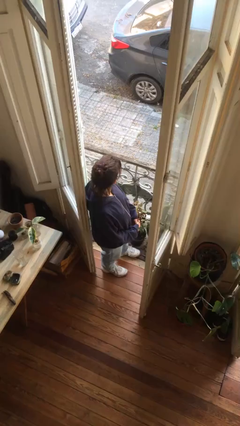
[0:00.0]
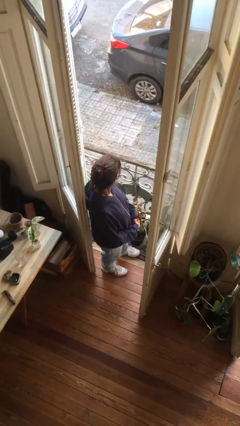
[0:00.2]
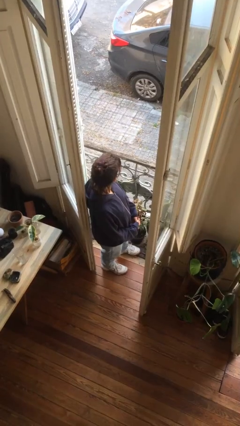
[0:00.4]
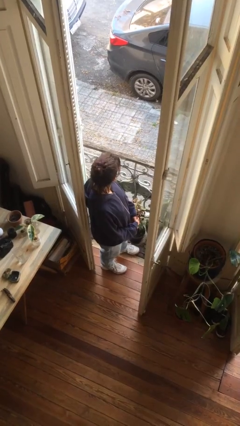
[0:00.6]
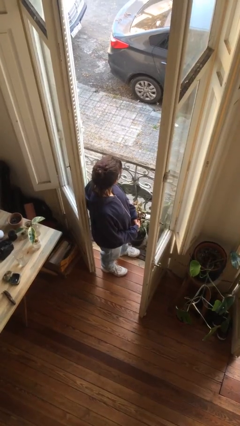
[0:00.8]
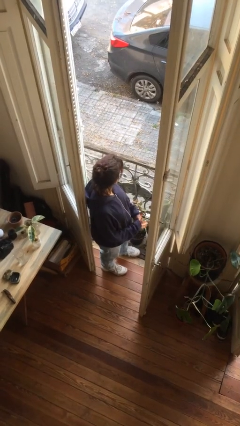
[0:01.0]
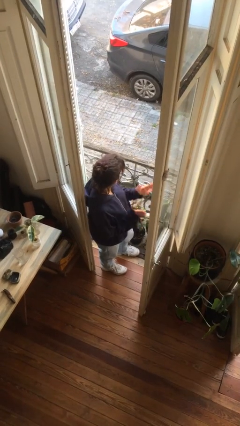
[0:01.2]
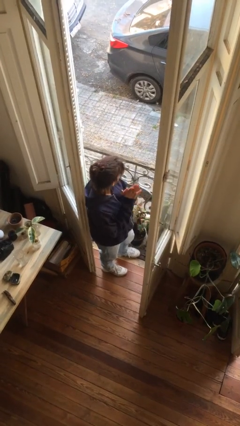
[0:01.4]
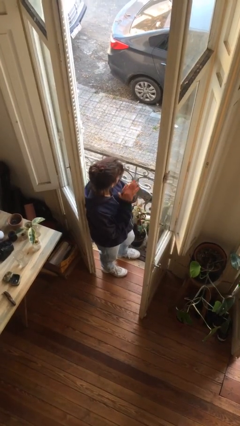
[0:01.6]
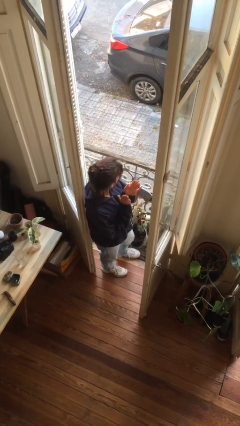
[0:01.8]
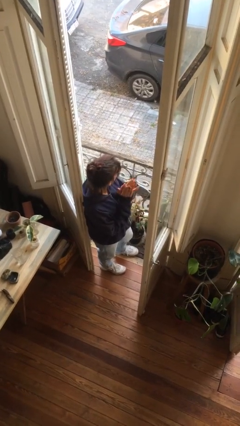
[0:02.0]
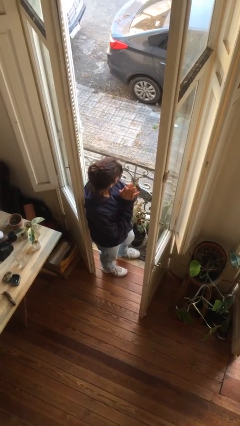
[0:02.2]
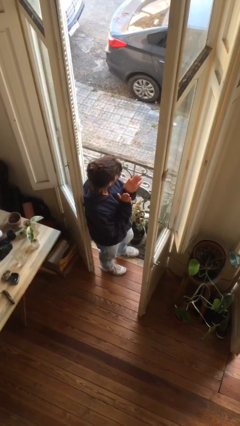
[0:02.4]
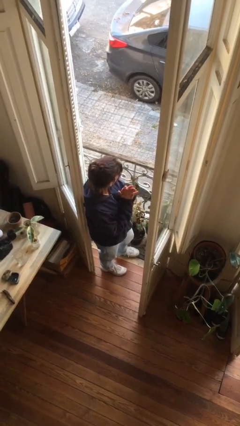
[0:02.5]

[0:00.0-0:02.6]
person claps hands

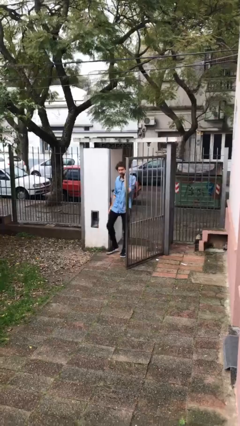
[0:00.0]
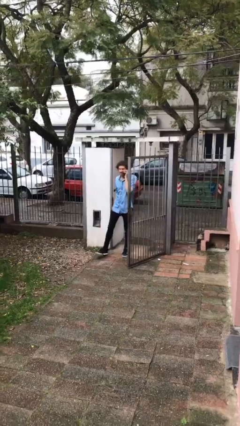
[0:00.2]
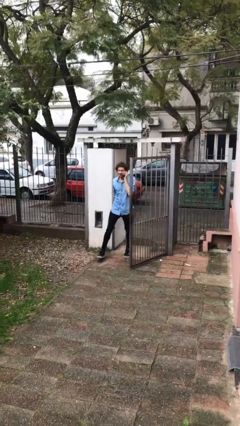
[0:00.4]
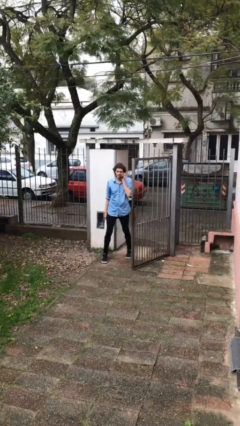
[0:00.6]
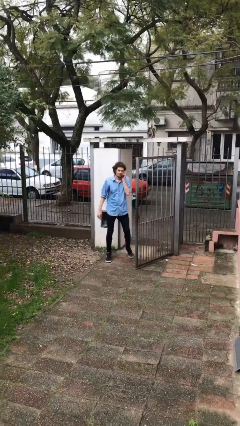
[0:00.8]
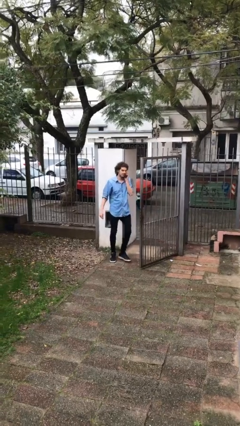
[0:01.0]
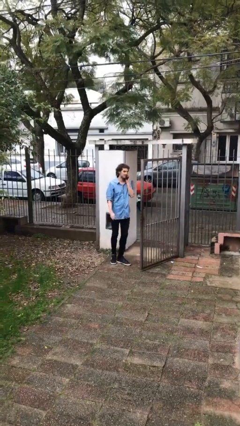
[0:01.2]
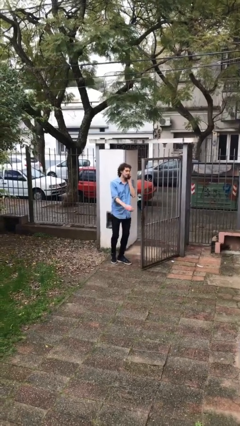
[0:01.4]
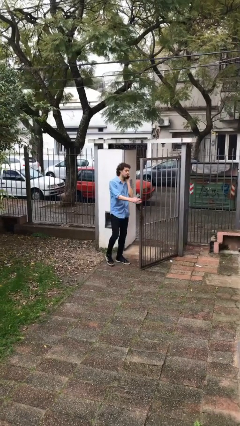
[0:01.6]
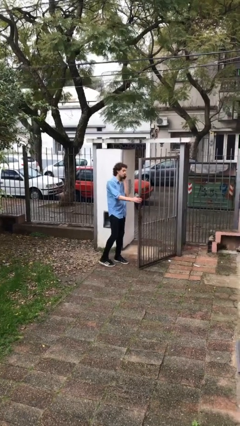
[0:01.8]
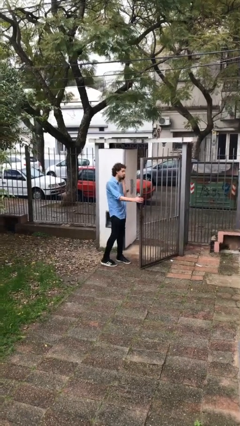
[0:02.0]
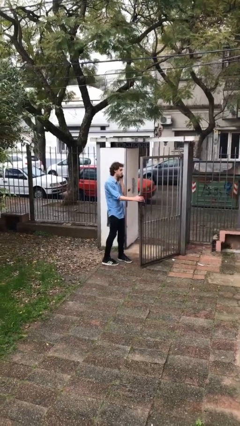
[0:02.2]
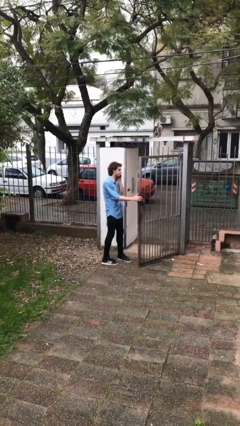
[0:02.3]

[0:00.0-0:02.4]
person enters scene through structure

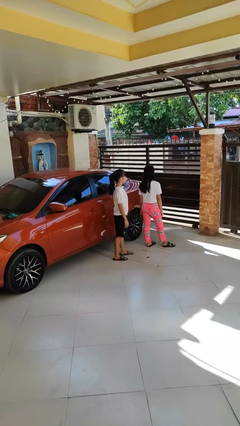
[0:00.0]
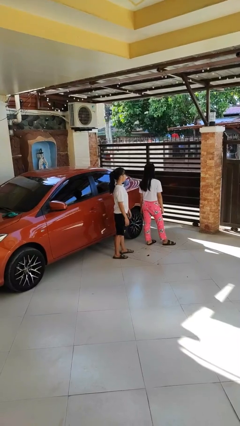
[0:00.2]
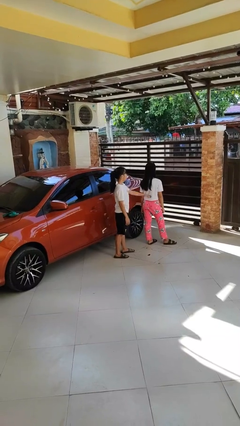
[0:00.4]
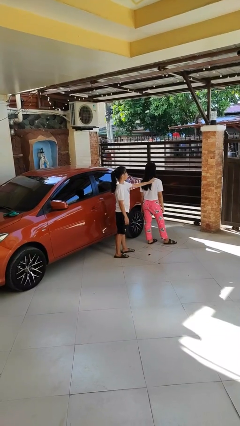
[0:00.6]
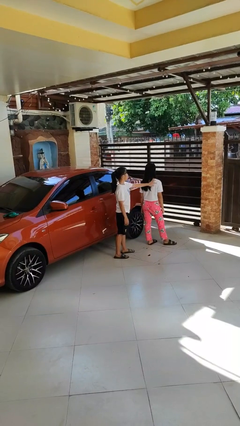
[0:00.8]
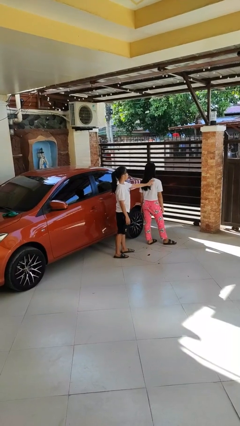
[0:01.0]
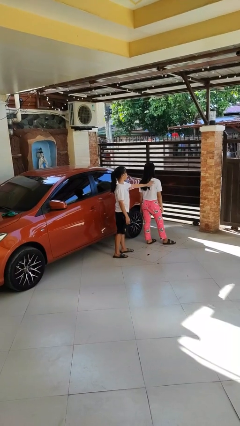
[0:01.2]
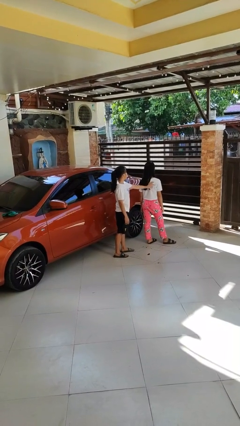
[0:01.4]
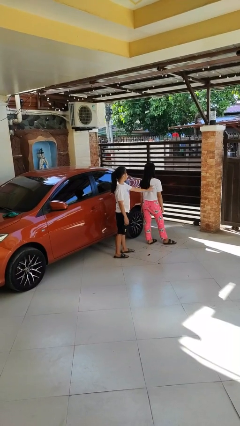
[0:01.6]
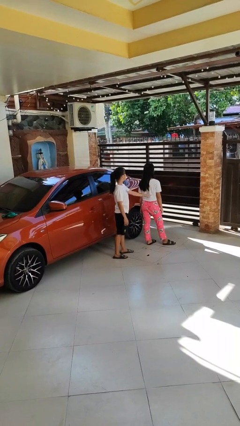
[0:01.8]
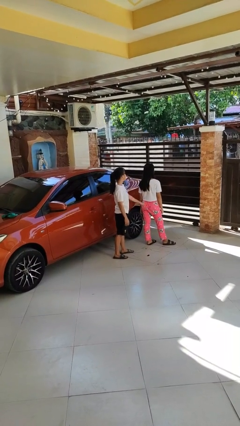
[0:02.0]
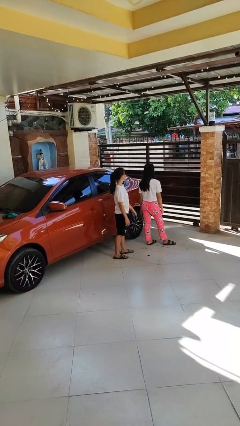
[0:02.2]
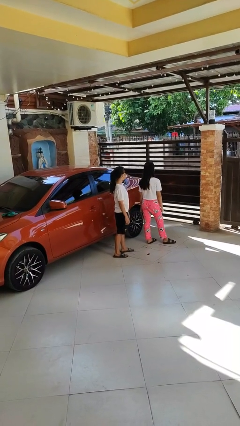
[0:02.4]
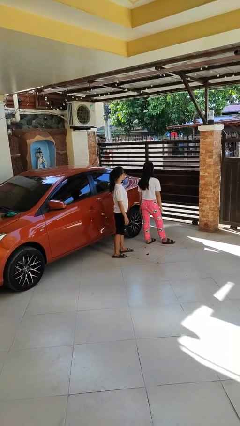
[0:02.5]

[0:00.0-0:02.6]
person touches back of person

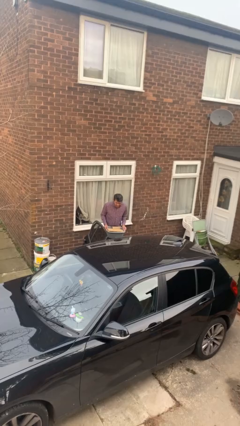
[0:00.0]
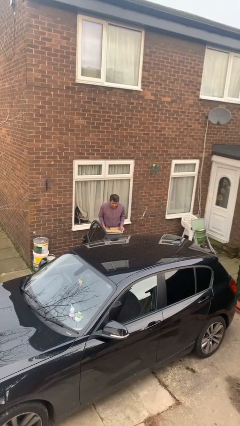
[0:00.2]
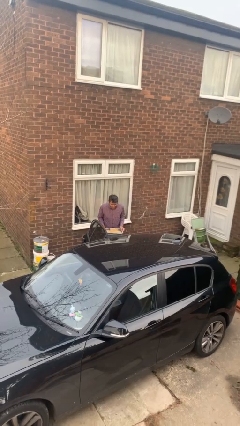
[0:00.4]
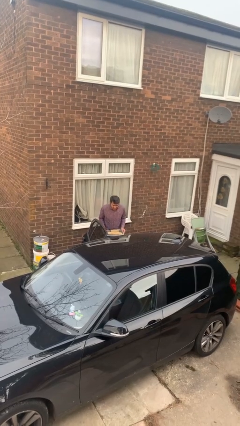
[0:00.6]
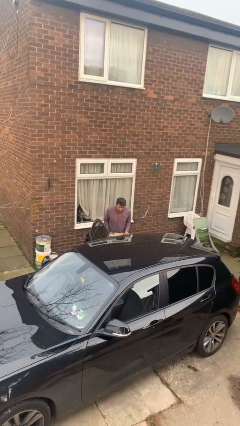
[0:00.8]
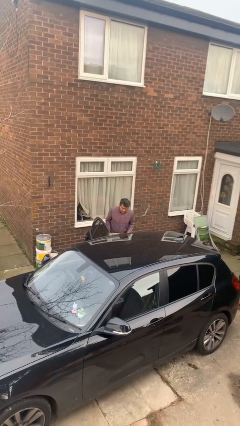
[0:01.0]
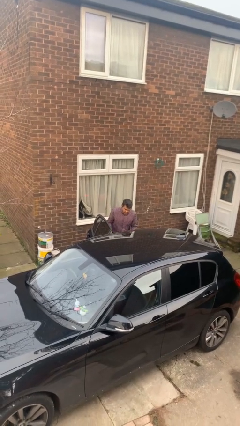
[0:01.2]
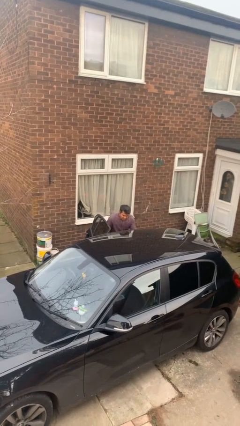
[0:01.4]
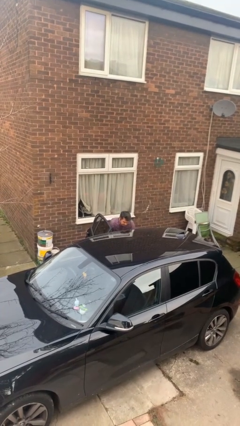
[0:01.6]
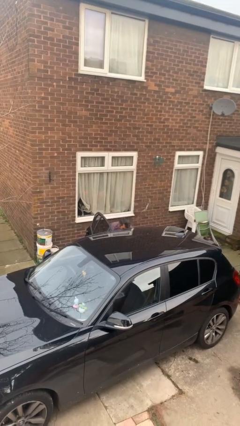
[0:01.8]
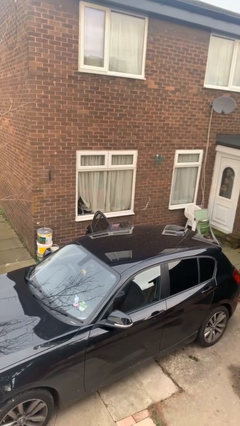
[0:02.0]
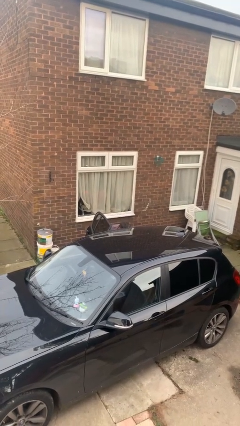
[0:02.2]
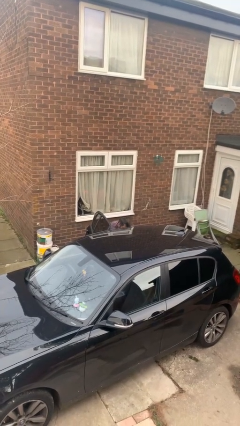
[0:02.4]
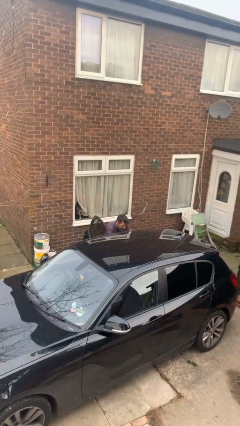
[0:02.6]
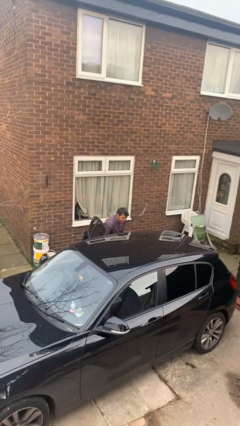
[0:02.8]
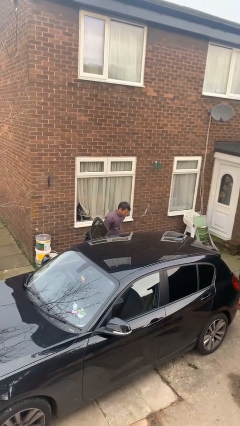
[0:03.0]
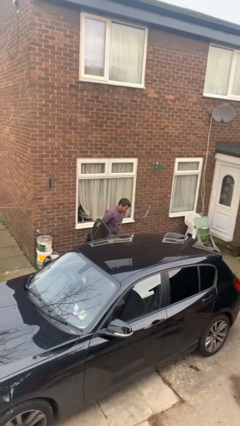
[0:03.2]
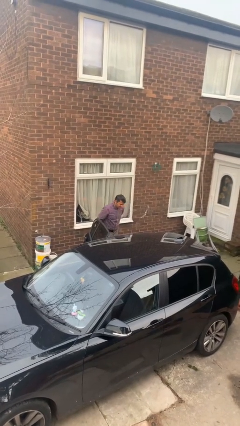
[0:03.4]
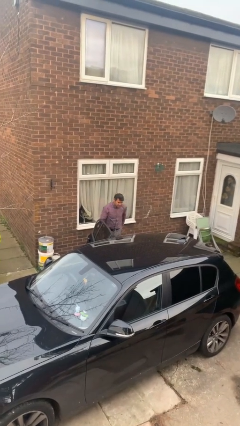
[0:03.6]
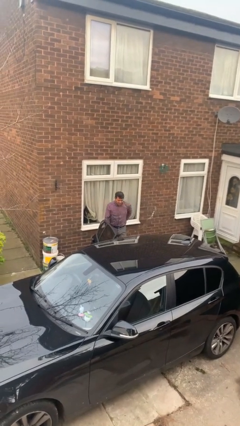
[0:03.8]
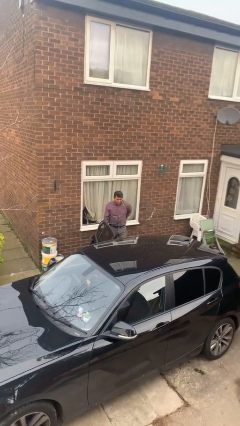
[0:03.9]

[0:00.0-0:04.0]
person loads car

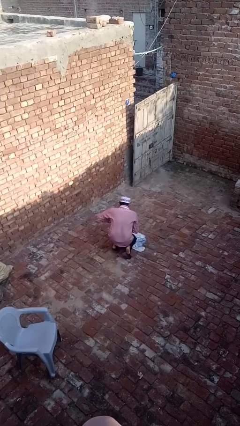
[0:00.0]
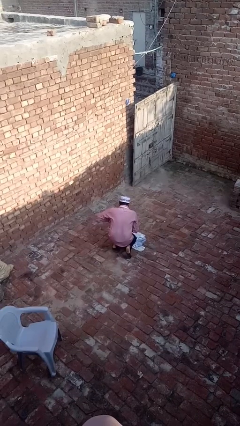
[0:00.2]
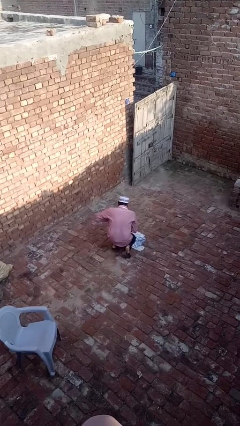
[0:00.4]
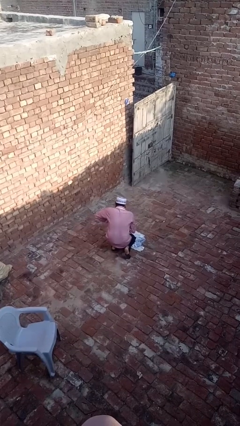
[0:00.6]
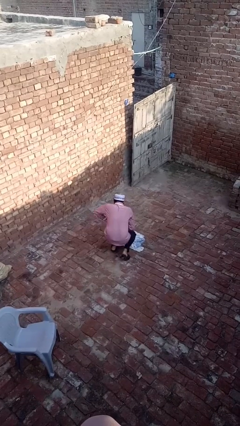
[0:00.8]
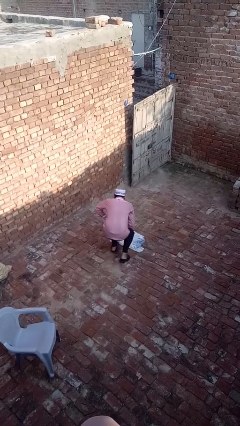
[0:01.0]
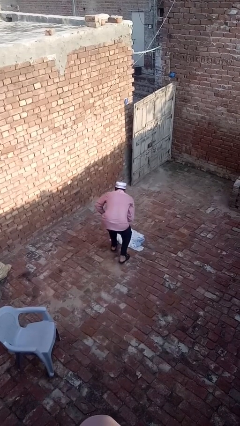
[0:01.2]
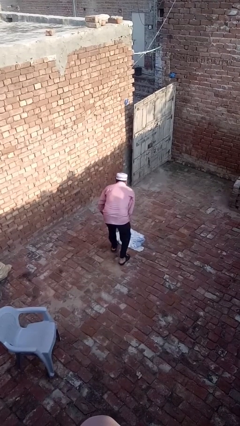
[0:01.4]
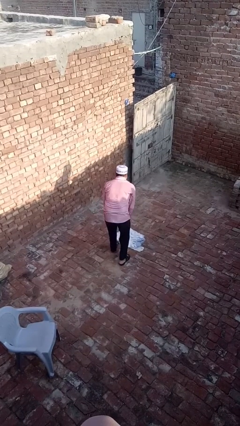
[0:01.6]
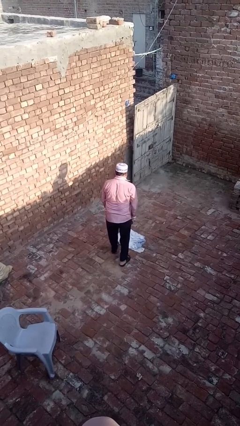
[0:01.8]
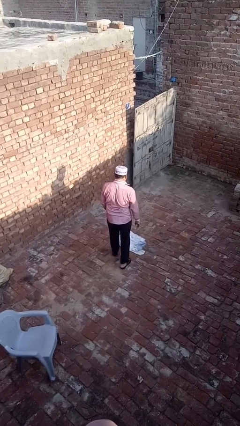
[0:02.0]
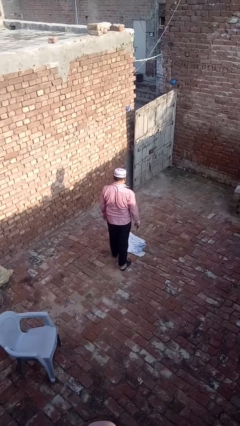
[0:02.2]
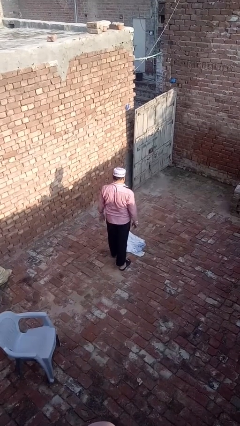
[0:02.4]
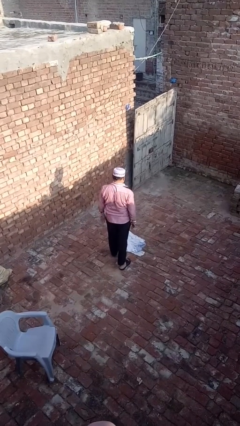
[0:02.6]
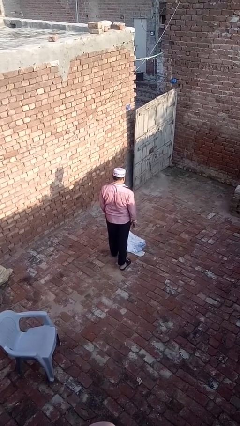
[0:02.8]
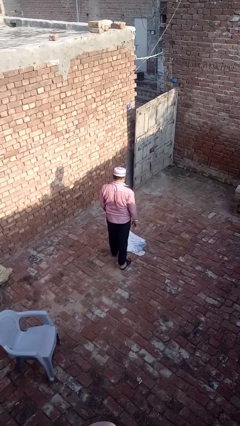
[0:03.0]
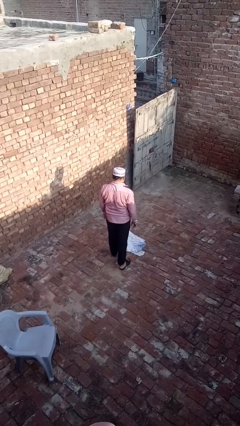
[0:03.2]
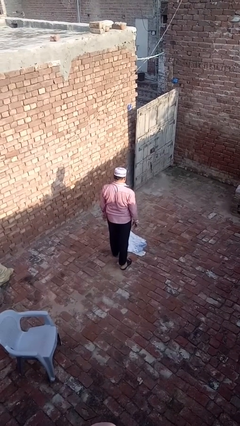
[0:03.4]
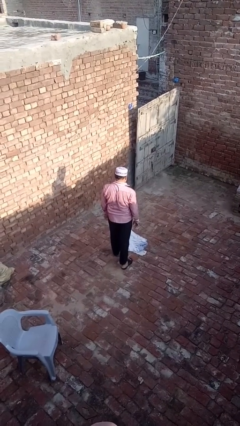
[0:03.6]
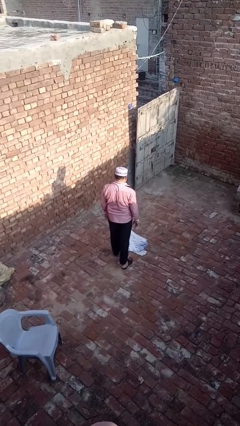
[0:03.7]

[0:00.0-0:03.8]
person stands up from floor

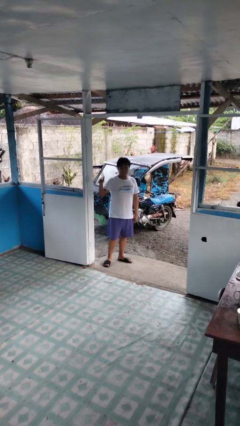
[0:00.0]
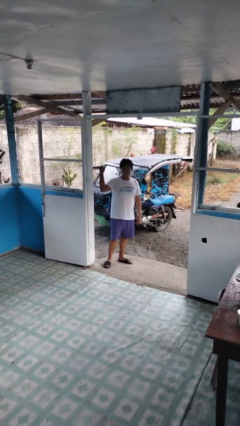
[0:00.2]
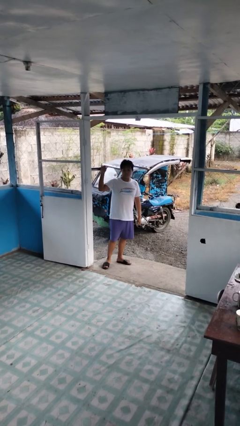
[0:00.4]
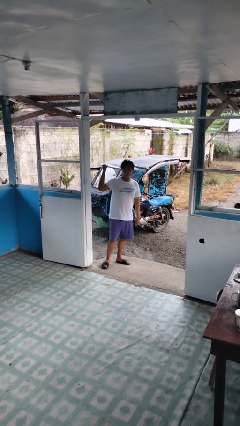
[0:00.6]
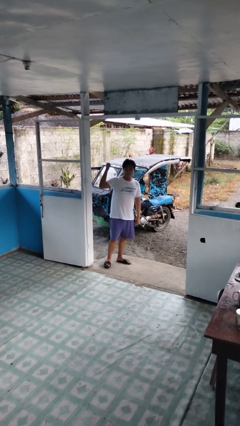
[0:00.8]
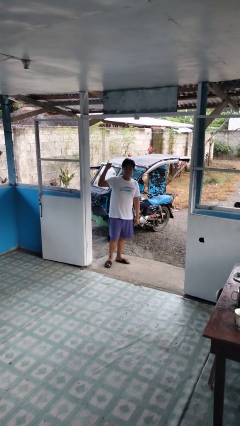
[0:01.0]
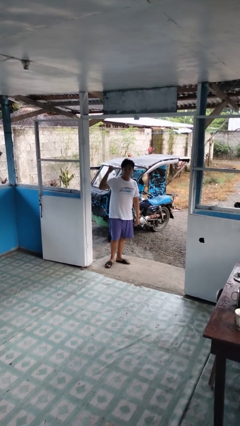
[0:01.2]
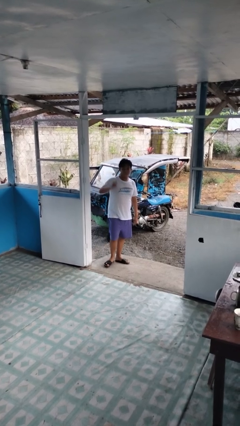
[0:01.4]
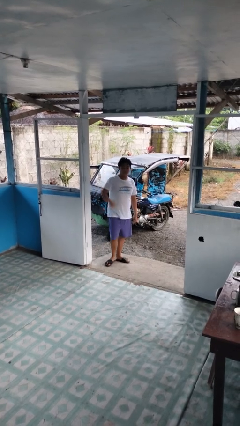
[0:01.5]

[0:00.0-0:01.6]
person gestures hang loose
